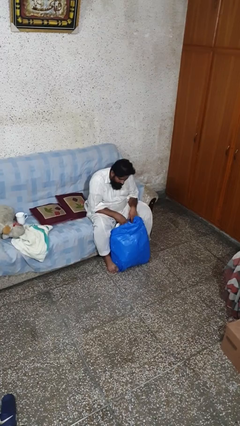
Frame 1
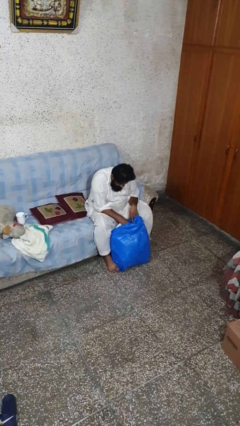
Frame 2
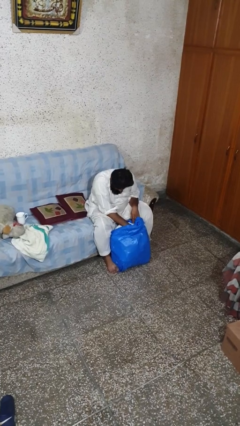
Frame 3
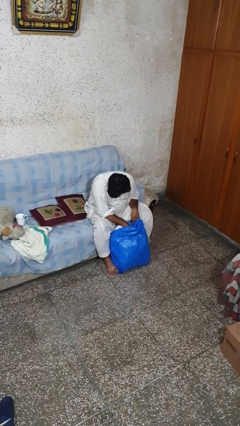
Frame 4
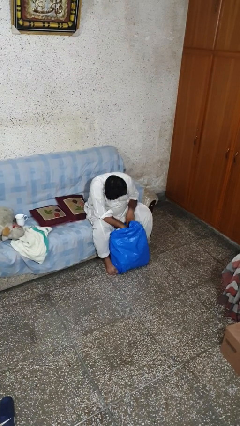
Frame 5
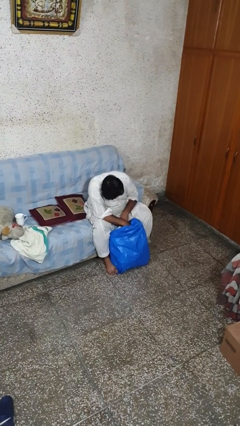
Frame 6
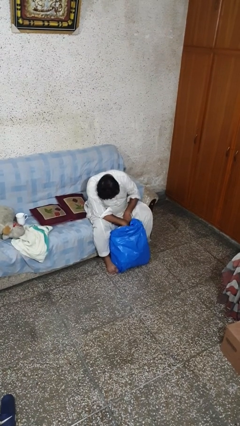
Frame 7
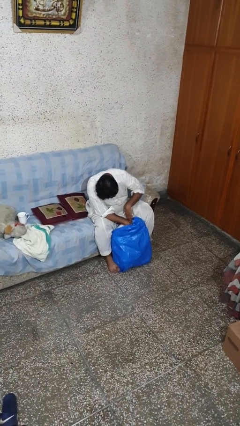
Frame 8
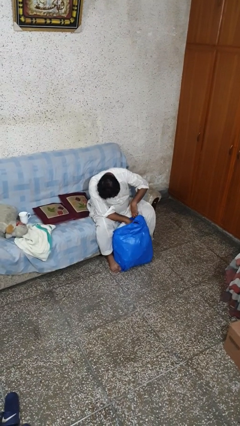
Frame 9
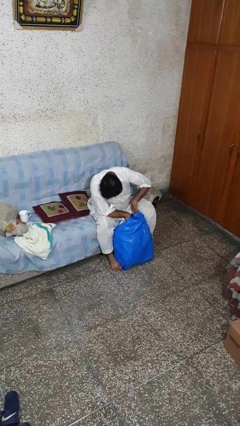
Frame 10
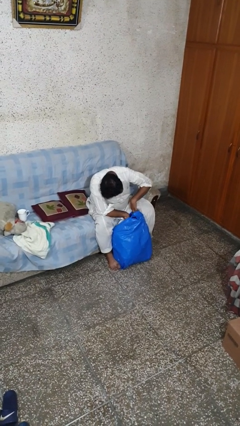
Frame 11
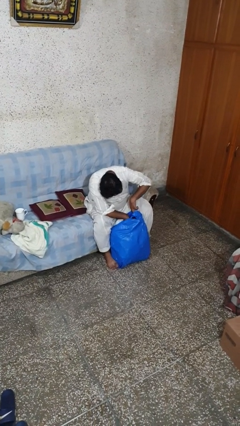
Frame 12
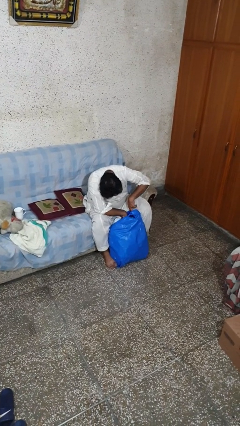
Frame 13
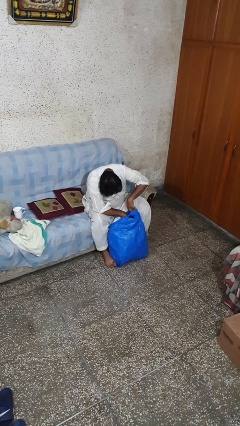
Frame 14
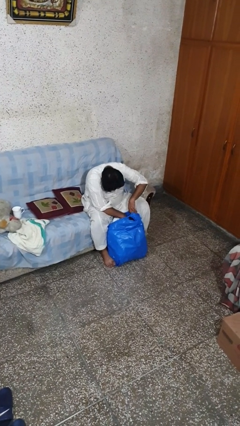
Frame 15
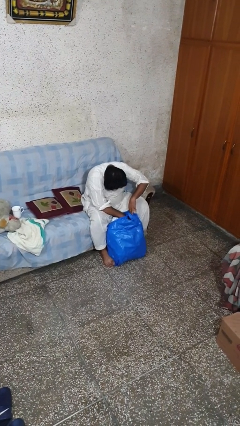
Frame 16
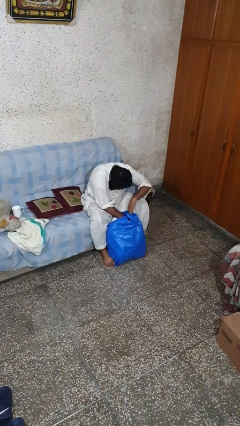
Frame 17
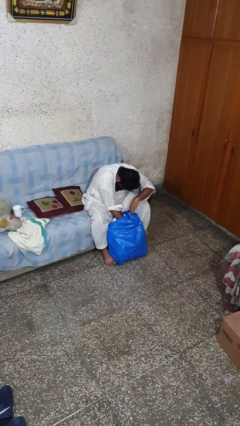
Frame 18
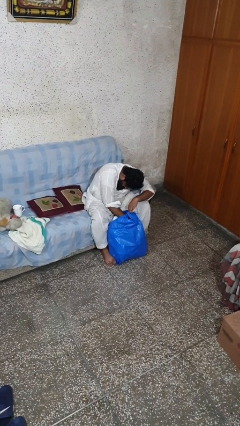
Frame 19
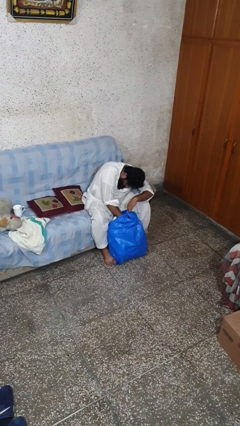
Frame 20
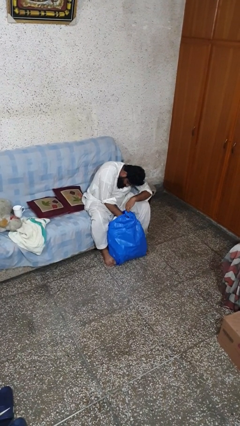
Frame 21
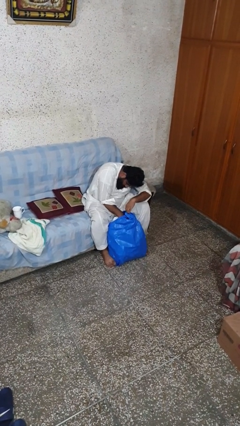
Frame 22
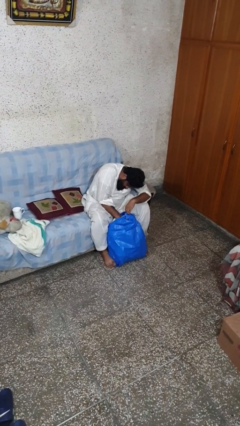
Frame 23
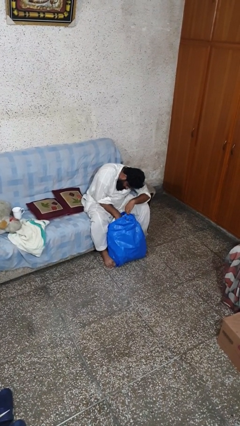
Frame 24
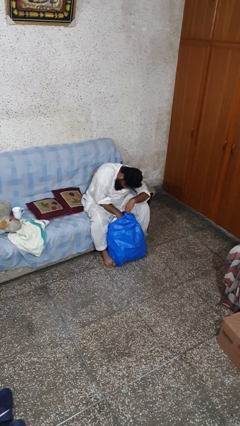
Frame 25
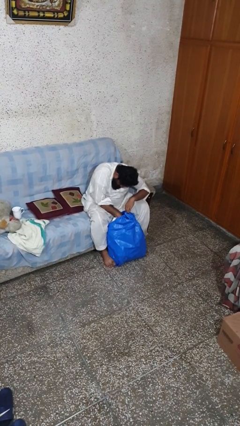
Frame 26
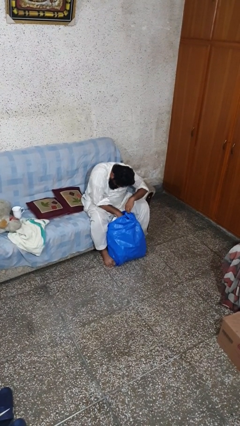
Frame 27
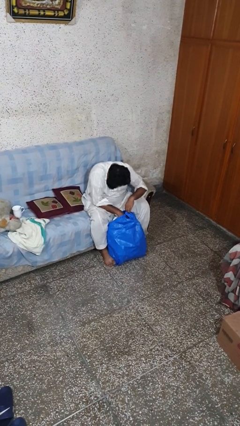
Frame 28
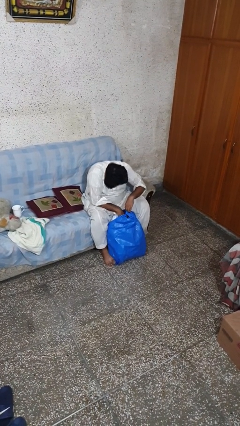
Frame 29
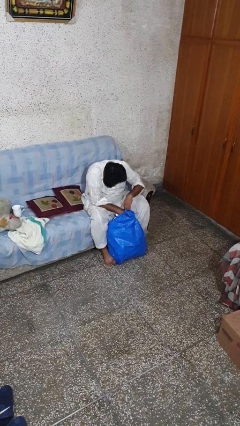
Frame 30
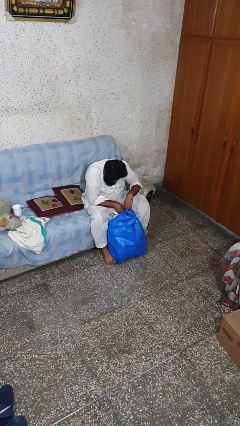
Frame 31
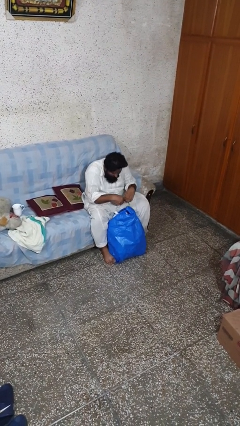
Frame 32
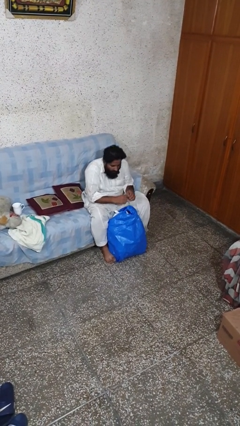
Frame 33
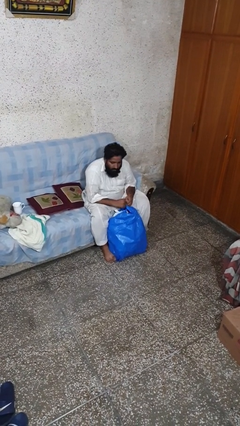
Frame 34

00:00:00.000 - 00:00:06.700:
person searches in bag

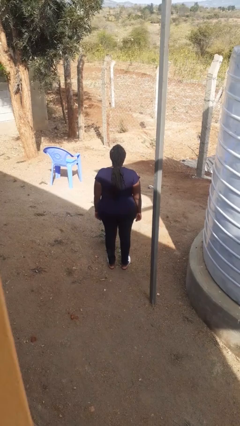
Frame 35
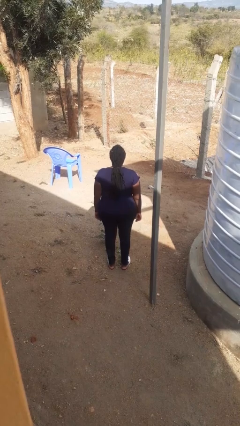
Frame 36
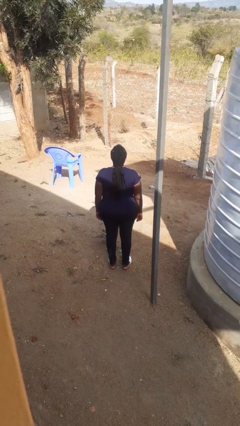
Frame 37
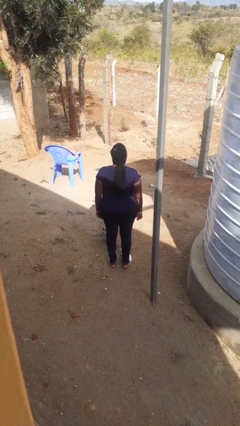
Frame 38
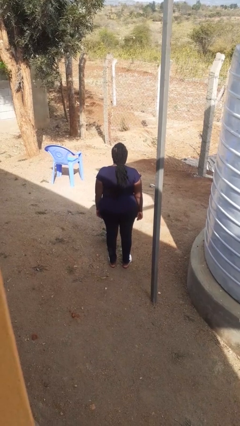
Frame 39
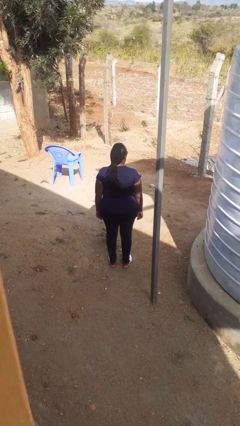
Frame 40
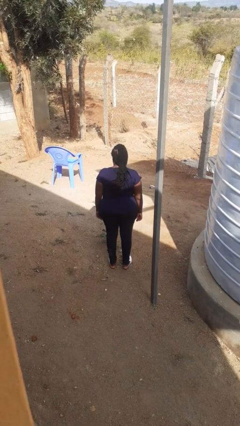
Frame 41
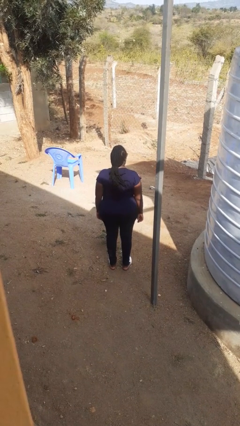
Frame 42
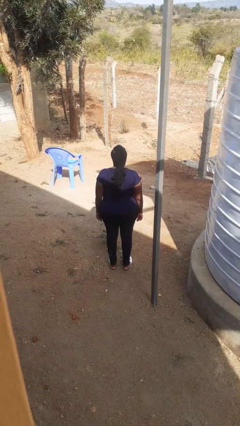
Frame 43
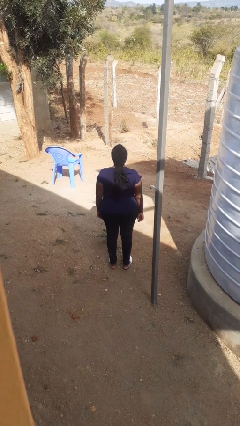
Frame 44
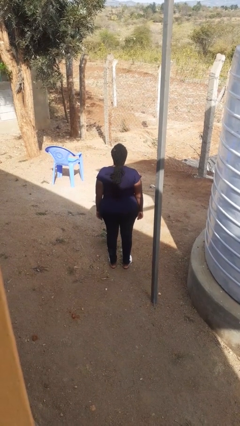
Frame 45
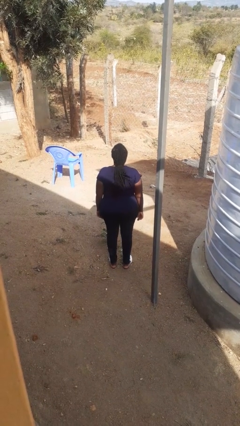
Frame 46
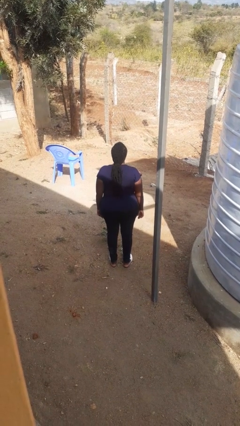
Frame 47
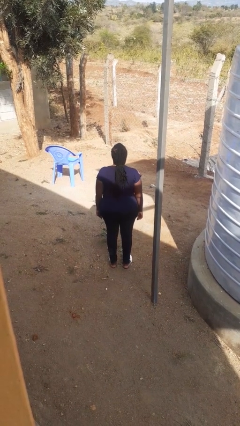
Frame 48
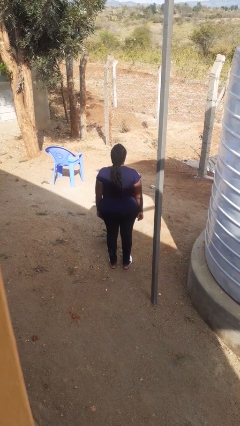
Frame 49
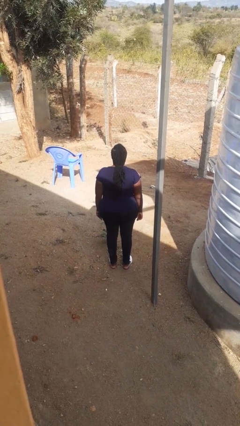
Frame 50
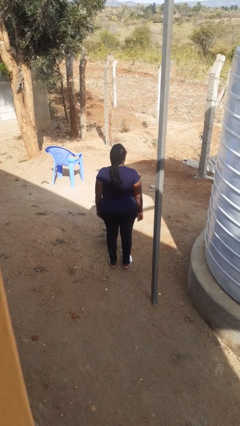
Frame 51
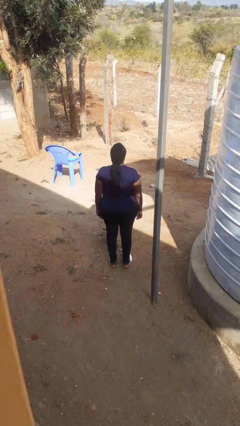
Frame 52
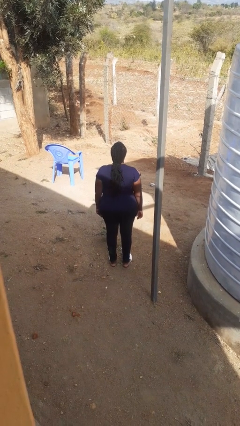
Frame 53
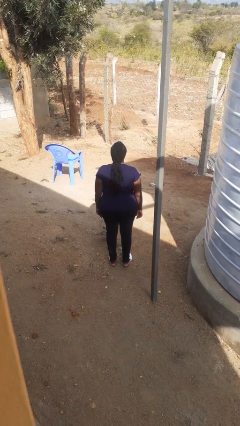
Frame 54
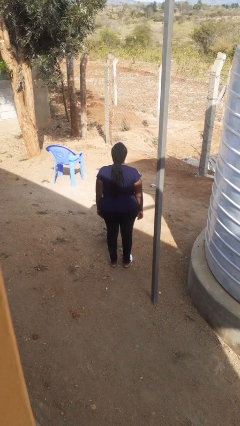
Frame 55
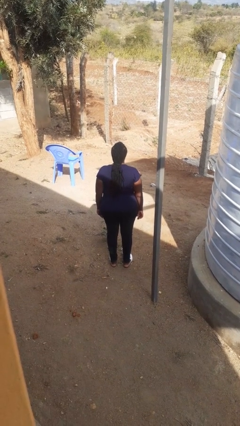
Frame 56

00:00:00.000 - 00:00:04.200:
person shakes head

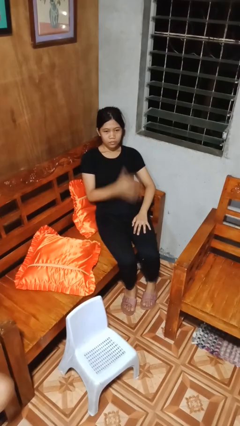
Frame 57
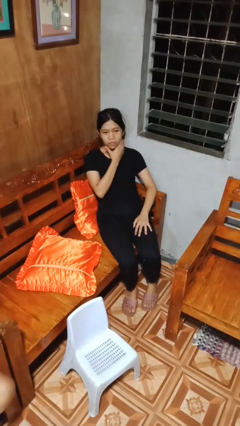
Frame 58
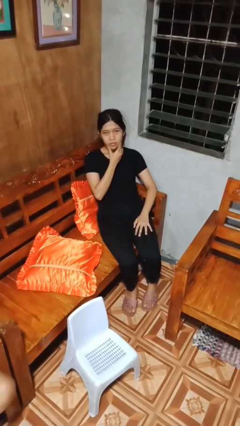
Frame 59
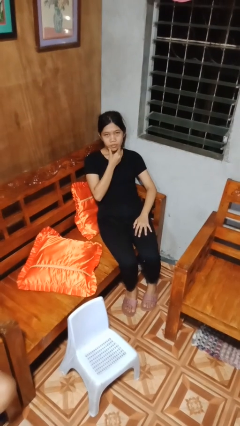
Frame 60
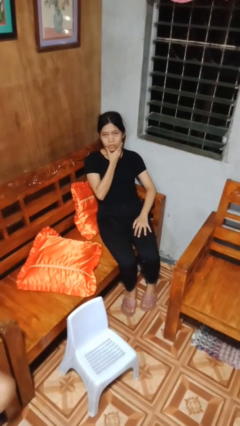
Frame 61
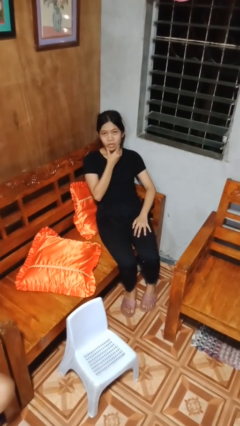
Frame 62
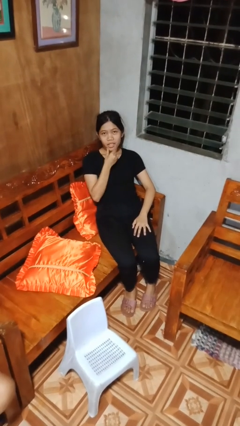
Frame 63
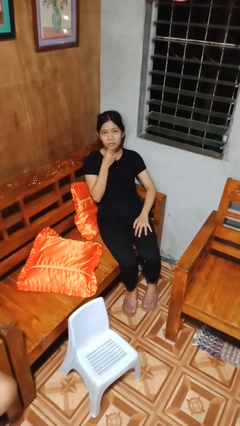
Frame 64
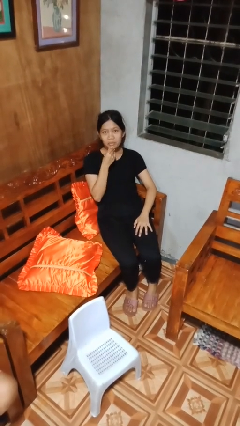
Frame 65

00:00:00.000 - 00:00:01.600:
person strokes chin

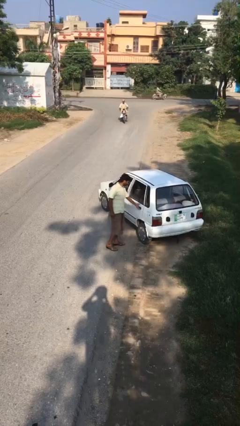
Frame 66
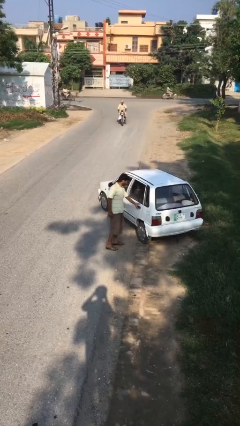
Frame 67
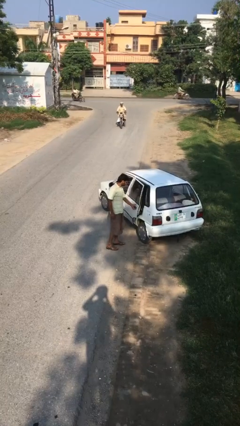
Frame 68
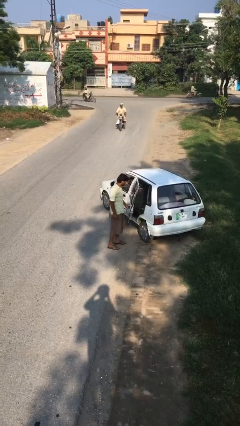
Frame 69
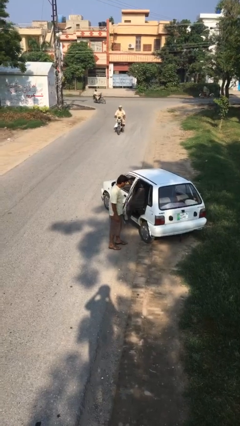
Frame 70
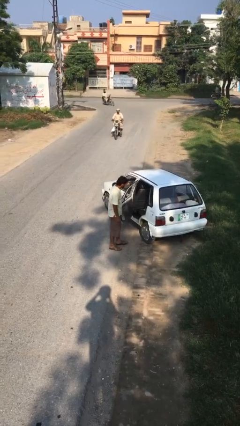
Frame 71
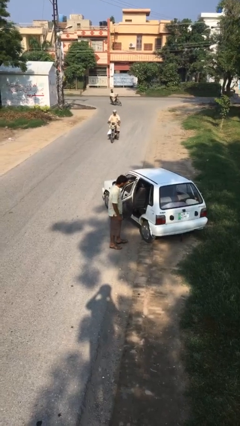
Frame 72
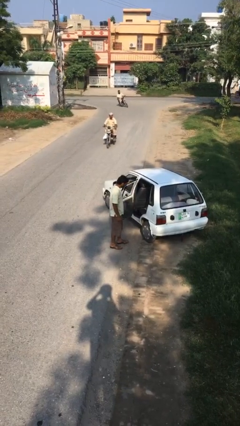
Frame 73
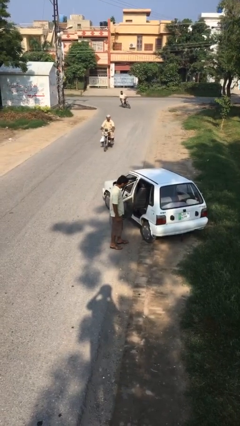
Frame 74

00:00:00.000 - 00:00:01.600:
person opens car door

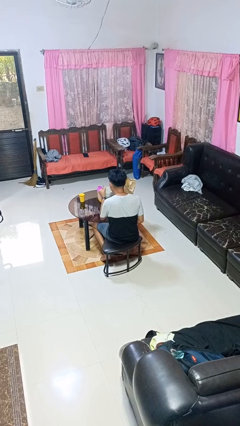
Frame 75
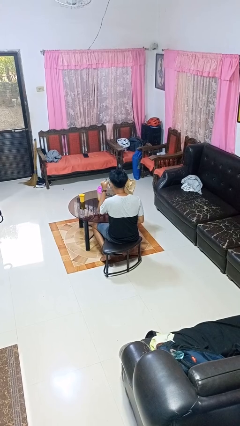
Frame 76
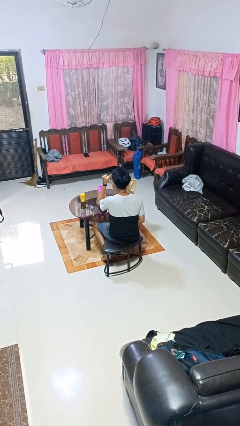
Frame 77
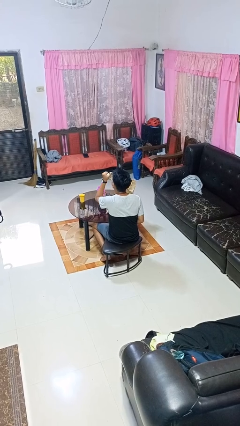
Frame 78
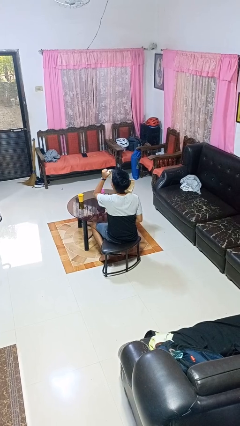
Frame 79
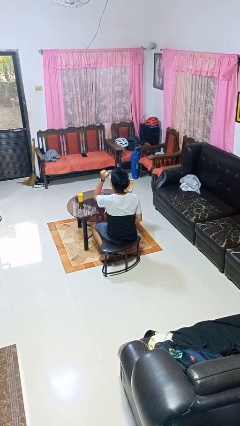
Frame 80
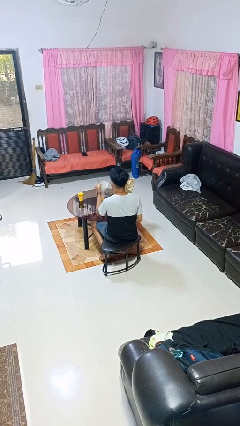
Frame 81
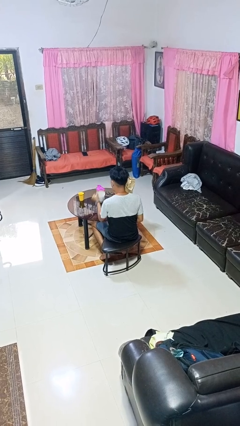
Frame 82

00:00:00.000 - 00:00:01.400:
person drinks from mug

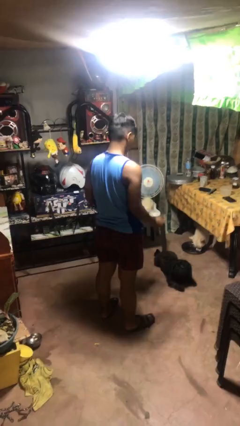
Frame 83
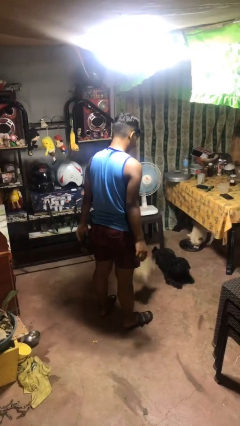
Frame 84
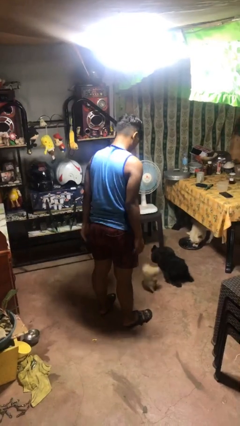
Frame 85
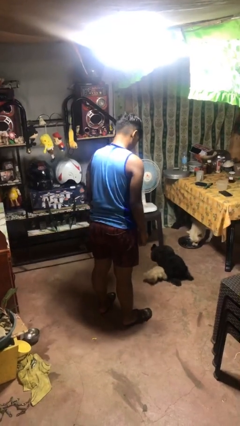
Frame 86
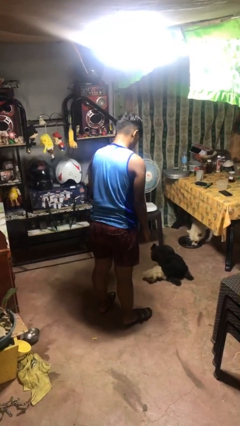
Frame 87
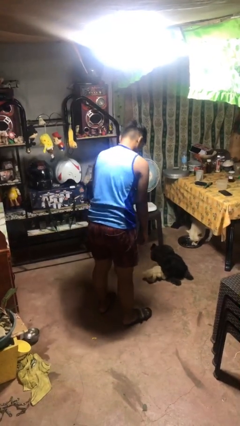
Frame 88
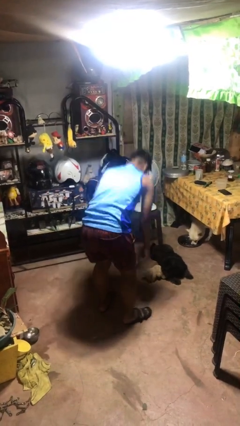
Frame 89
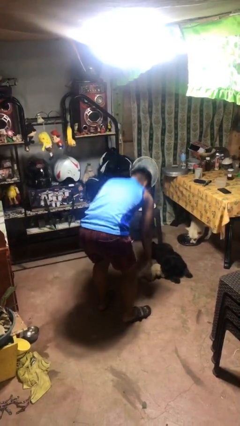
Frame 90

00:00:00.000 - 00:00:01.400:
person drops object

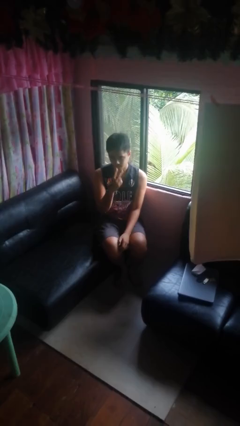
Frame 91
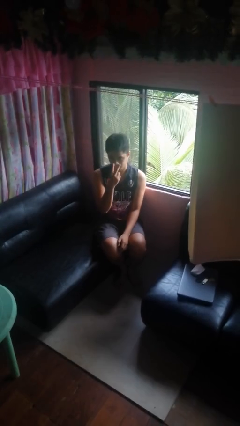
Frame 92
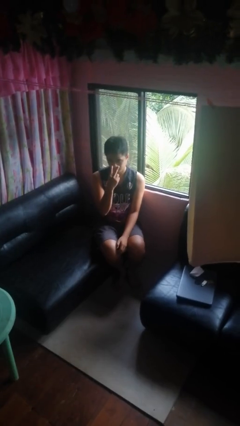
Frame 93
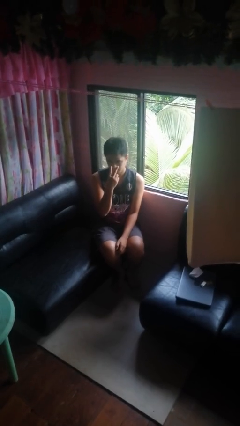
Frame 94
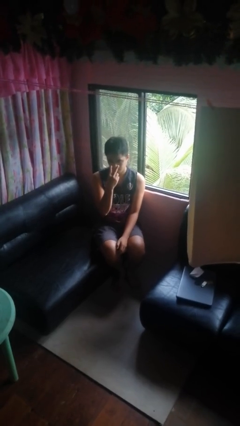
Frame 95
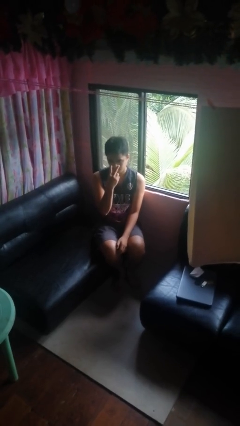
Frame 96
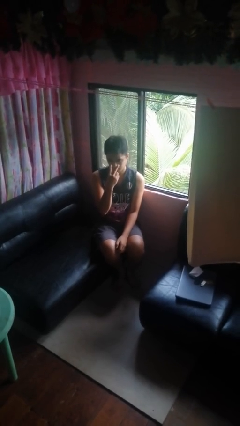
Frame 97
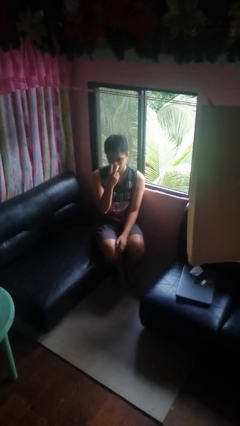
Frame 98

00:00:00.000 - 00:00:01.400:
person gestures watch closely
